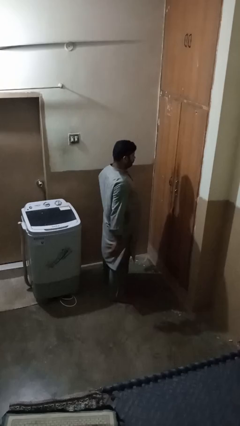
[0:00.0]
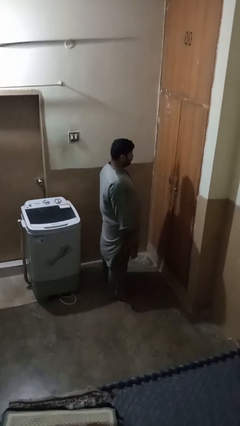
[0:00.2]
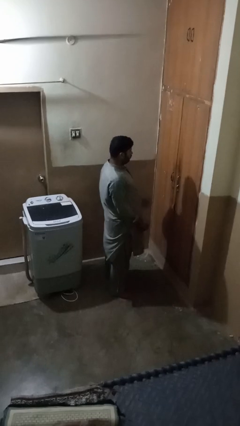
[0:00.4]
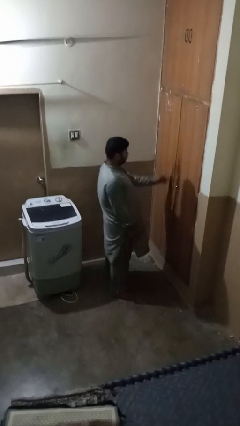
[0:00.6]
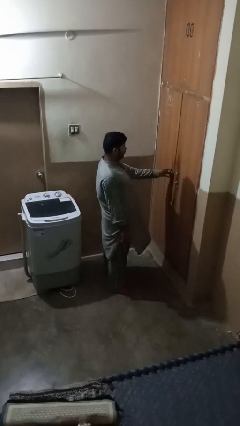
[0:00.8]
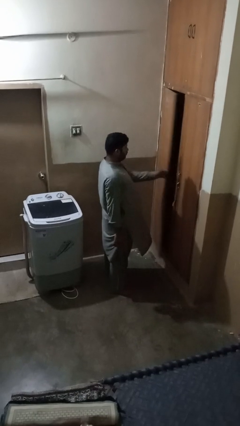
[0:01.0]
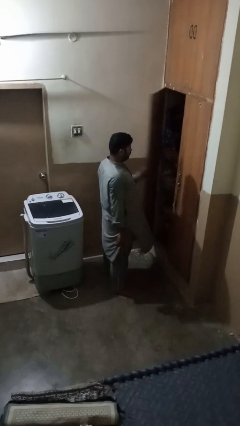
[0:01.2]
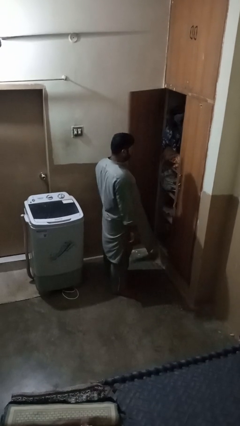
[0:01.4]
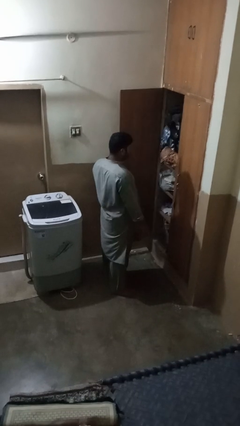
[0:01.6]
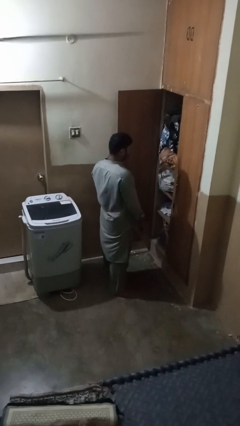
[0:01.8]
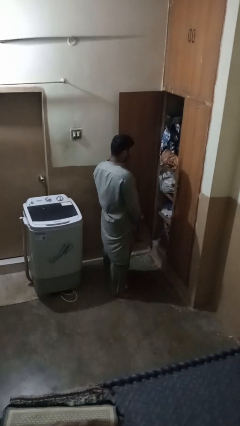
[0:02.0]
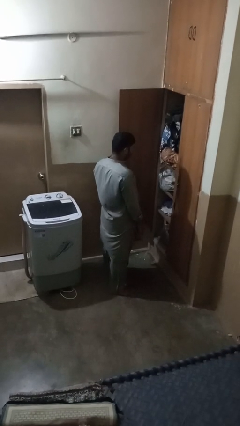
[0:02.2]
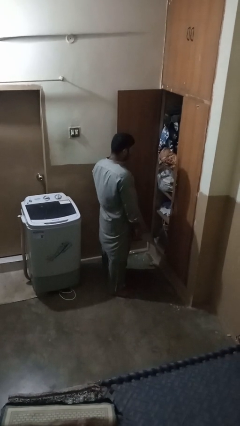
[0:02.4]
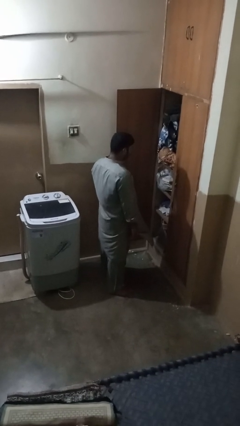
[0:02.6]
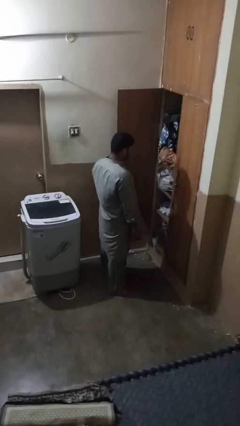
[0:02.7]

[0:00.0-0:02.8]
person opens closet door

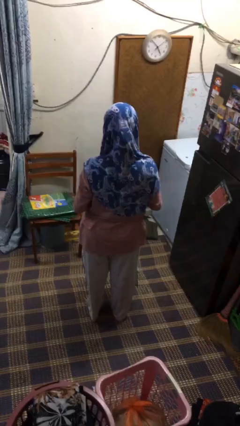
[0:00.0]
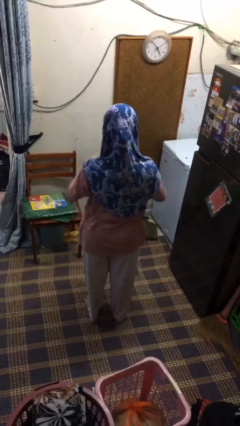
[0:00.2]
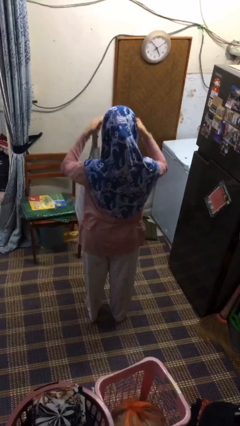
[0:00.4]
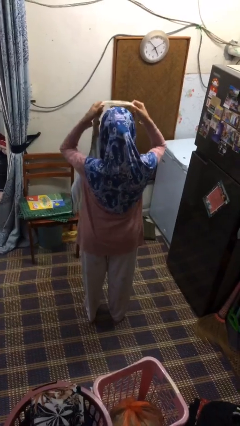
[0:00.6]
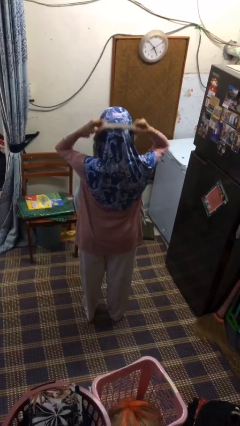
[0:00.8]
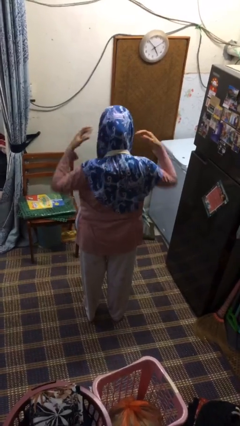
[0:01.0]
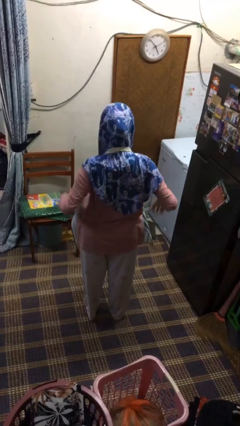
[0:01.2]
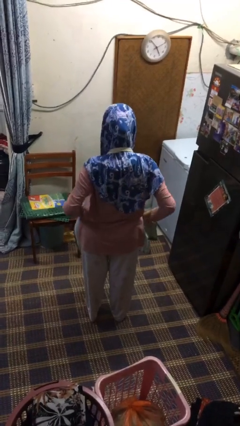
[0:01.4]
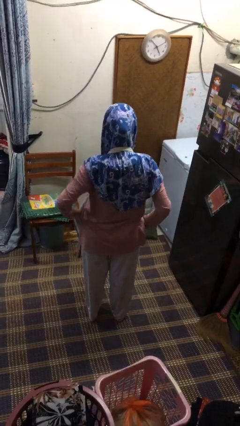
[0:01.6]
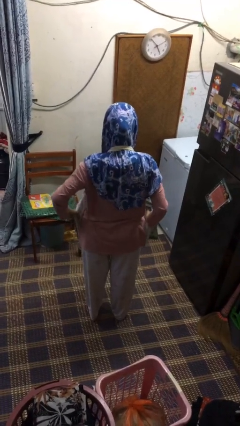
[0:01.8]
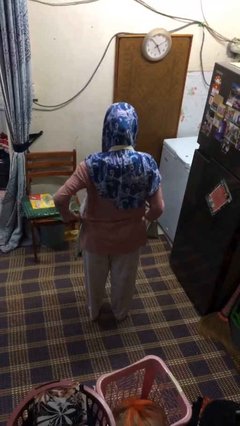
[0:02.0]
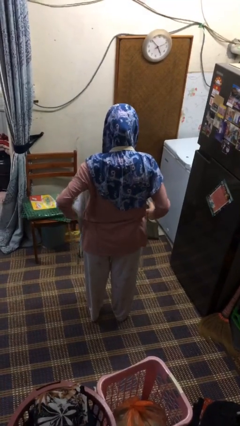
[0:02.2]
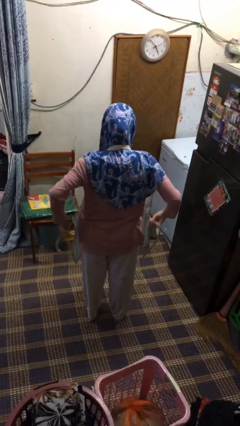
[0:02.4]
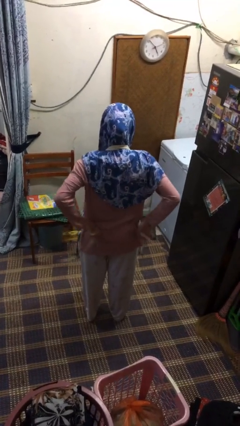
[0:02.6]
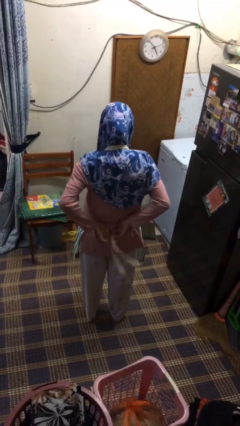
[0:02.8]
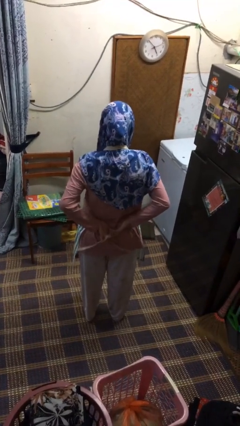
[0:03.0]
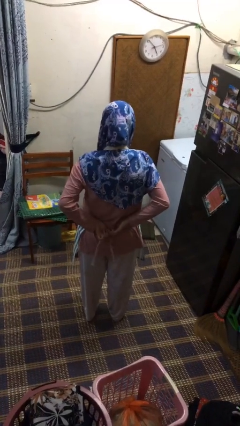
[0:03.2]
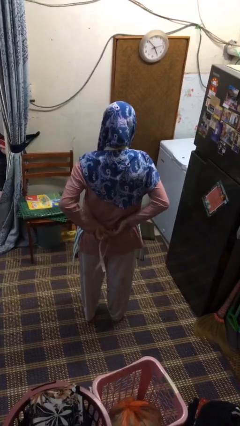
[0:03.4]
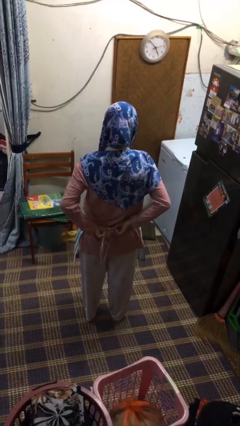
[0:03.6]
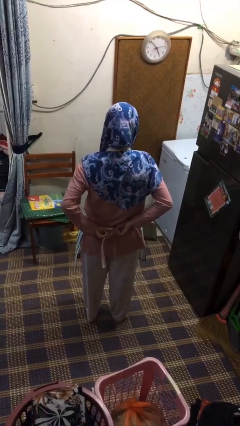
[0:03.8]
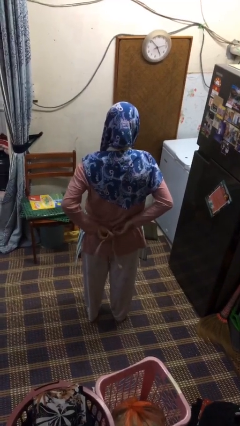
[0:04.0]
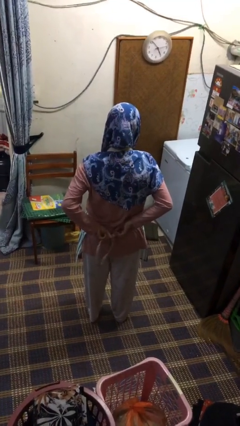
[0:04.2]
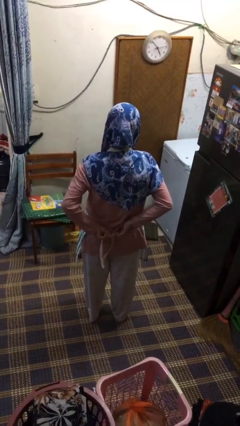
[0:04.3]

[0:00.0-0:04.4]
person puts on apron

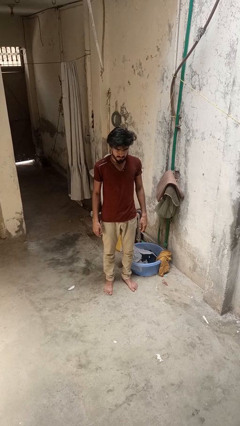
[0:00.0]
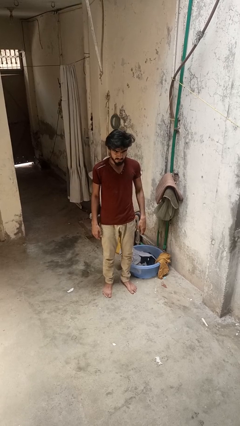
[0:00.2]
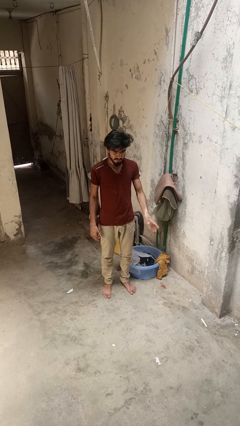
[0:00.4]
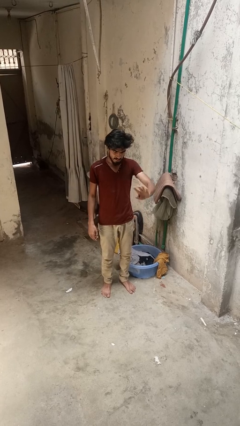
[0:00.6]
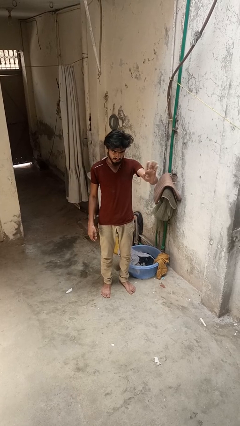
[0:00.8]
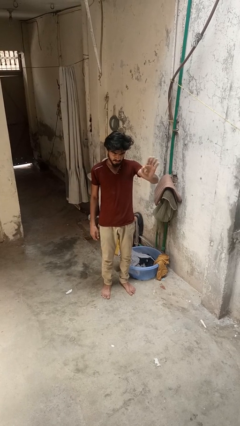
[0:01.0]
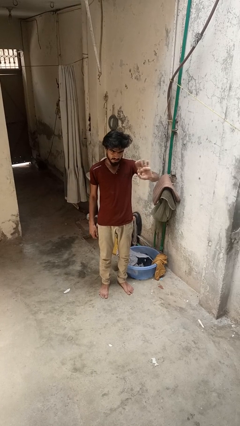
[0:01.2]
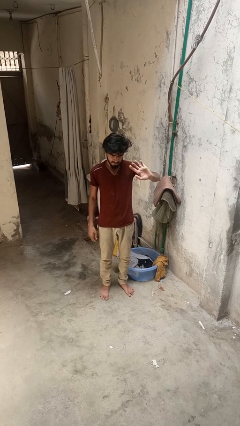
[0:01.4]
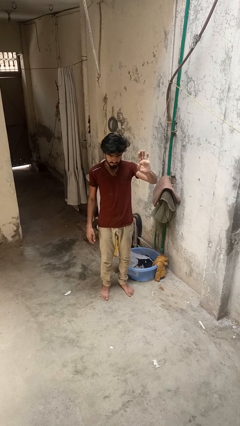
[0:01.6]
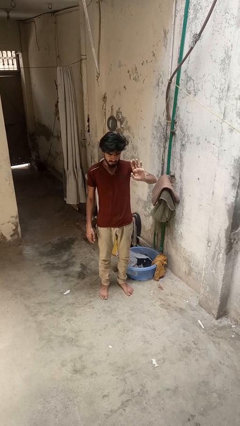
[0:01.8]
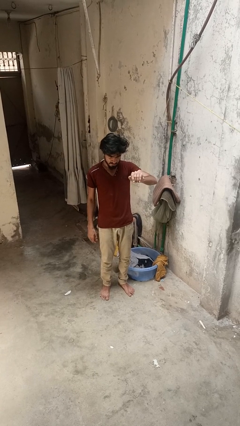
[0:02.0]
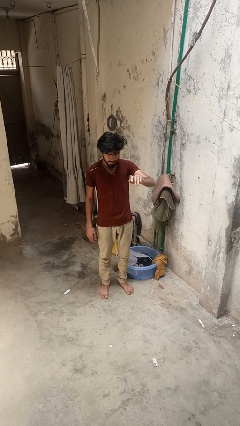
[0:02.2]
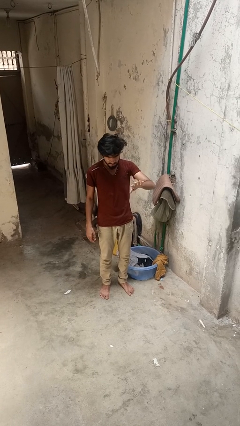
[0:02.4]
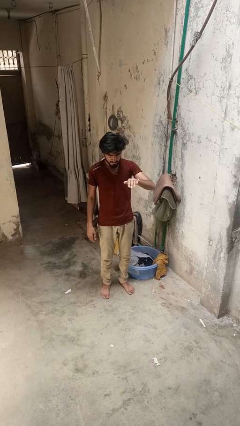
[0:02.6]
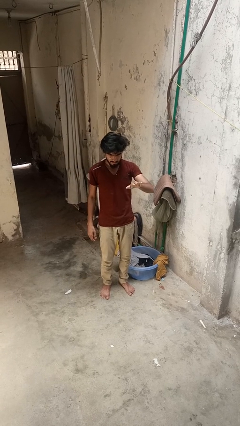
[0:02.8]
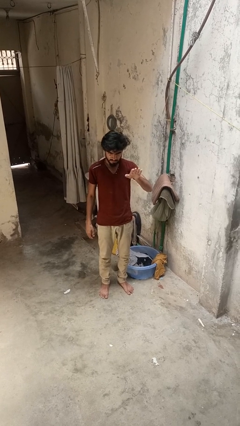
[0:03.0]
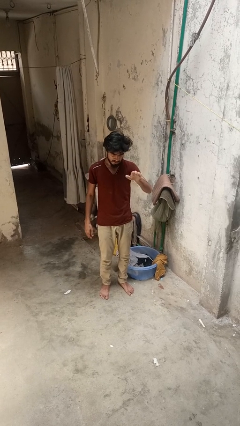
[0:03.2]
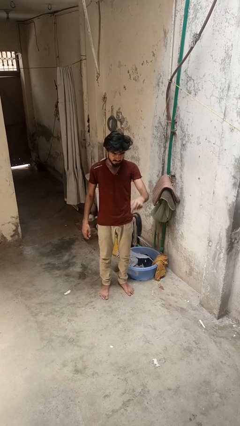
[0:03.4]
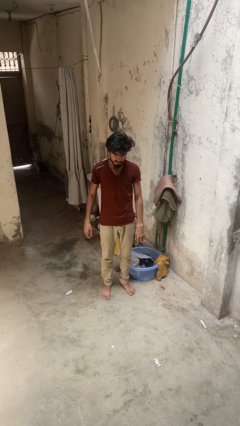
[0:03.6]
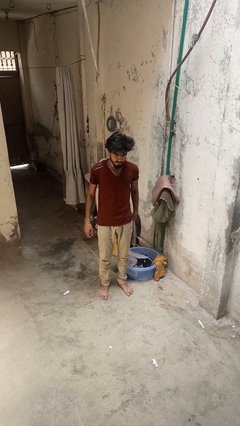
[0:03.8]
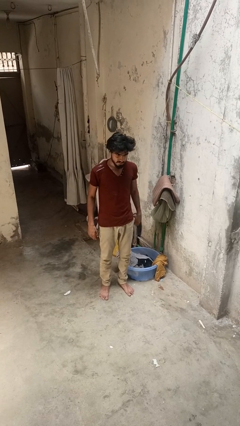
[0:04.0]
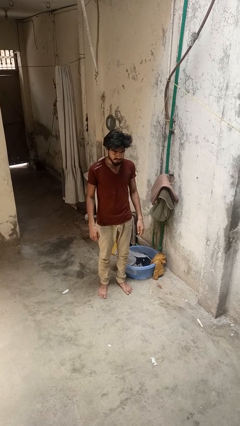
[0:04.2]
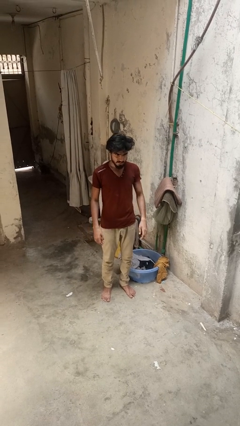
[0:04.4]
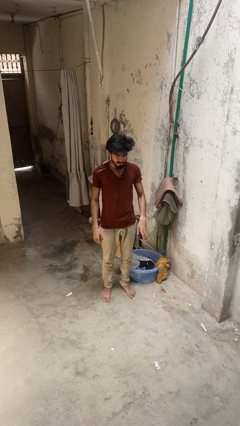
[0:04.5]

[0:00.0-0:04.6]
person gestures come here

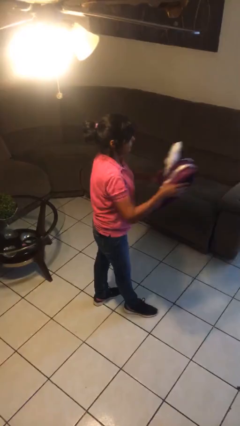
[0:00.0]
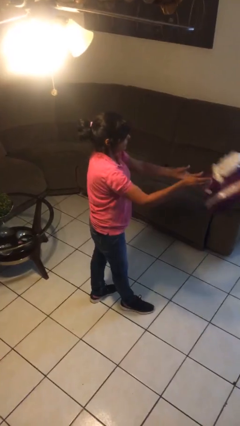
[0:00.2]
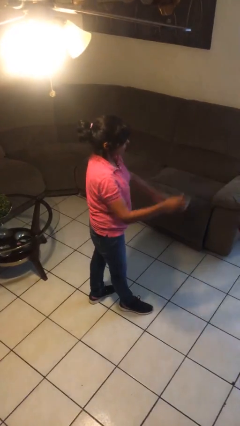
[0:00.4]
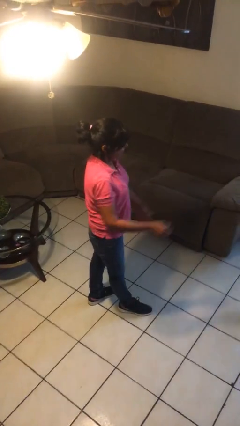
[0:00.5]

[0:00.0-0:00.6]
person throws object to ground

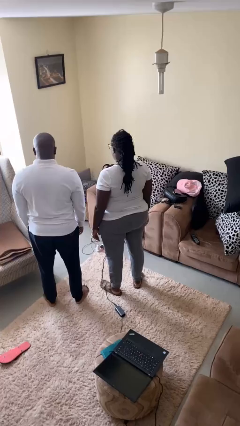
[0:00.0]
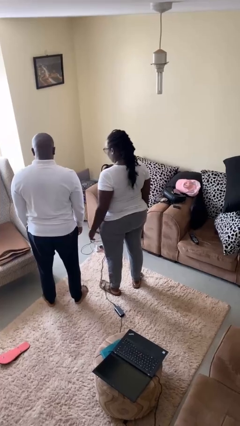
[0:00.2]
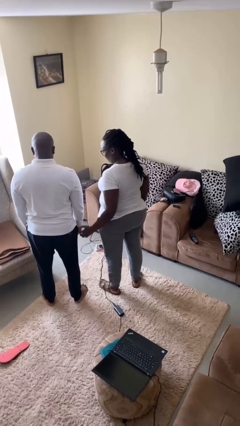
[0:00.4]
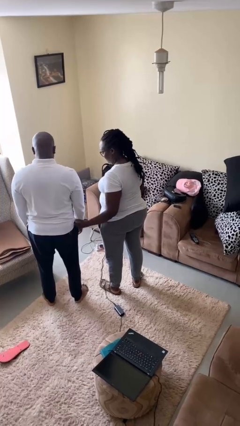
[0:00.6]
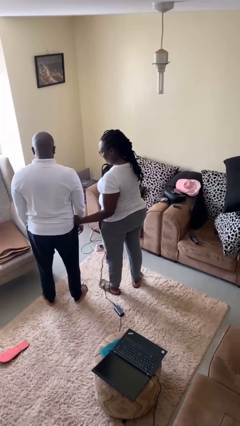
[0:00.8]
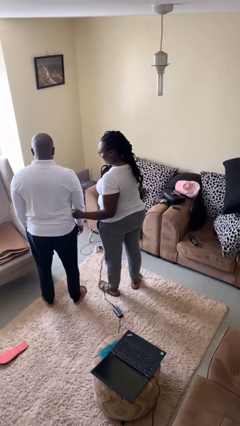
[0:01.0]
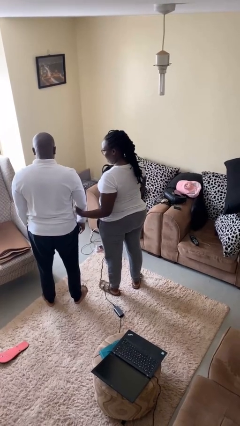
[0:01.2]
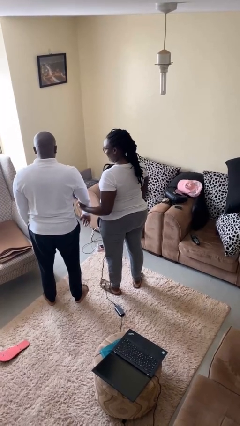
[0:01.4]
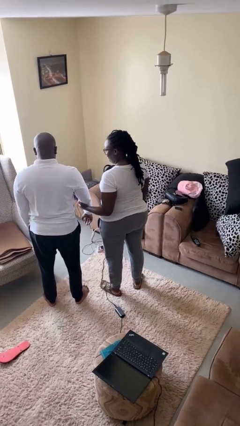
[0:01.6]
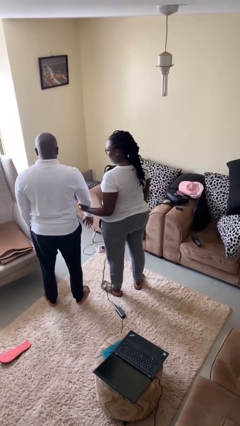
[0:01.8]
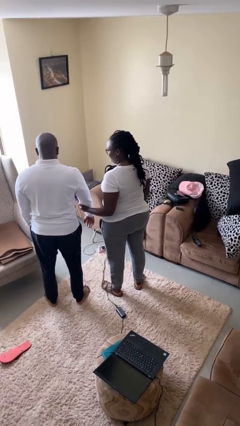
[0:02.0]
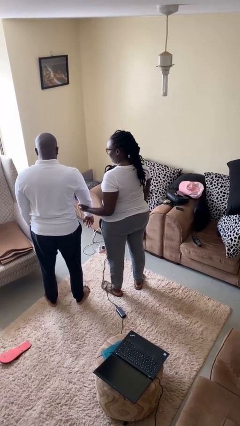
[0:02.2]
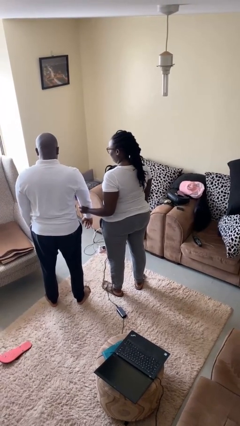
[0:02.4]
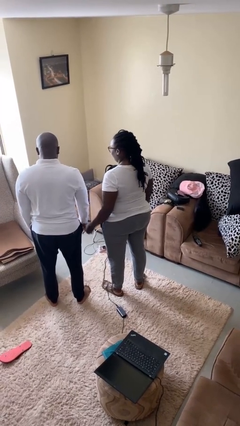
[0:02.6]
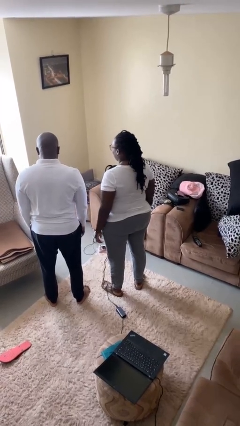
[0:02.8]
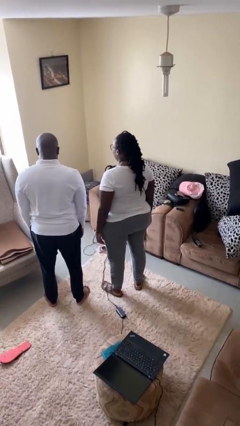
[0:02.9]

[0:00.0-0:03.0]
person grabs person by forearm

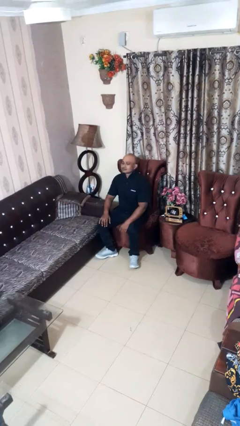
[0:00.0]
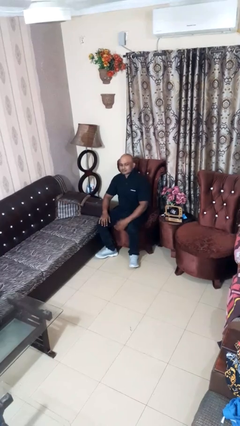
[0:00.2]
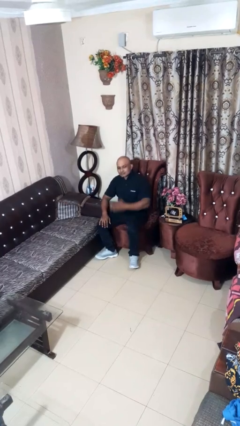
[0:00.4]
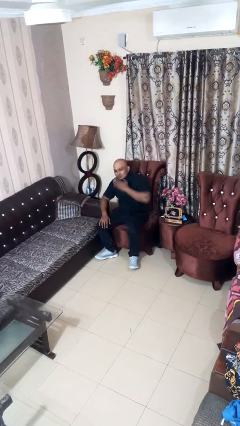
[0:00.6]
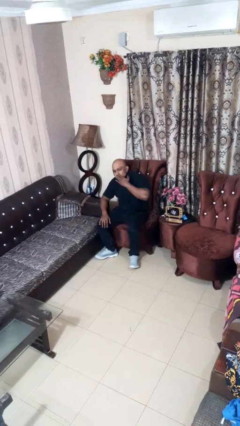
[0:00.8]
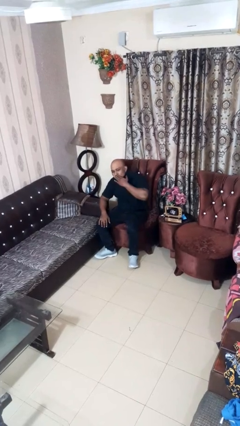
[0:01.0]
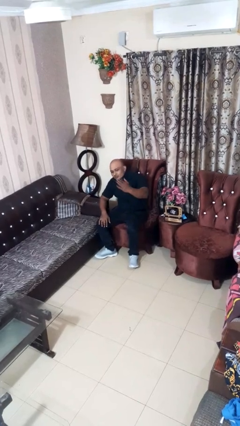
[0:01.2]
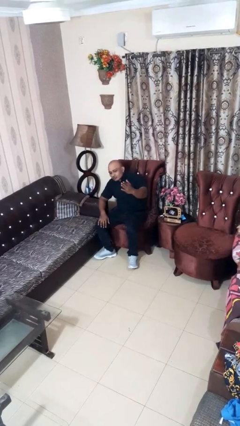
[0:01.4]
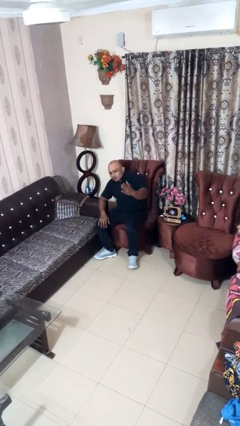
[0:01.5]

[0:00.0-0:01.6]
person gestures blow kiss

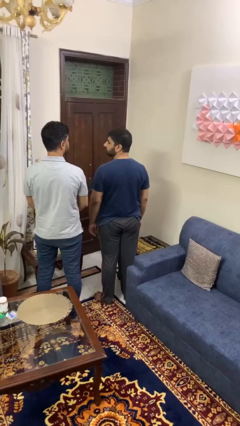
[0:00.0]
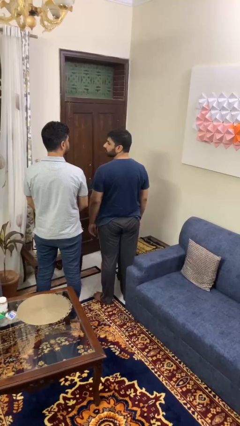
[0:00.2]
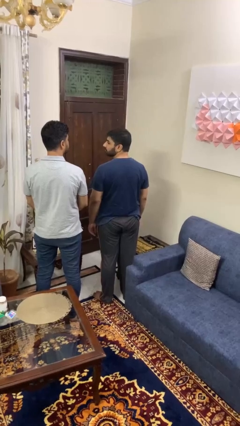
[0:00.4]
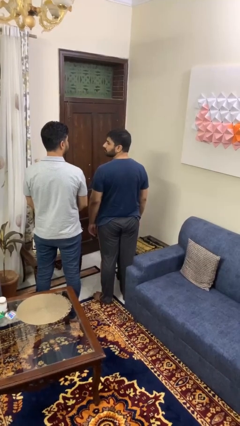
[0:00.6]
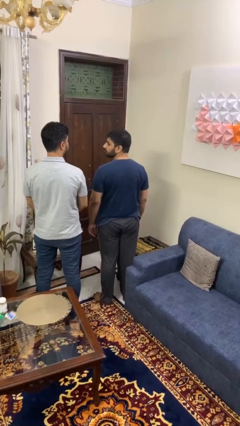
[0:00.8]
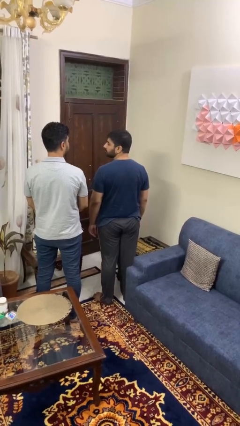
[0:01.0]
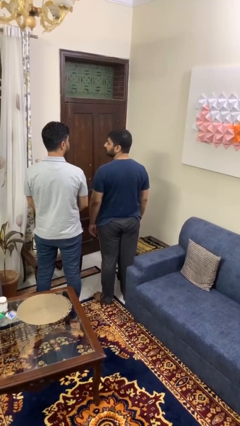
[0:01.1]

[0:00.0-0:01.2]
person looks over shoulder
